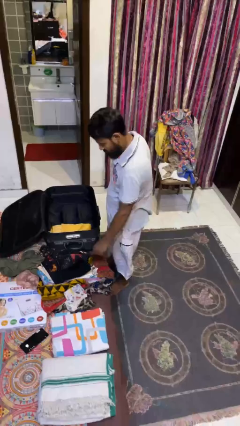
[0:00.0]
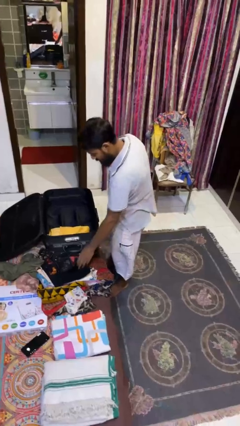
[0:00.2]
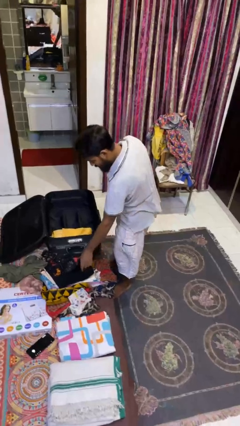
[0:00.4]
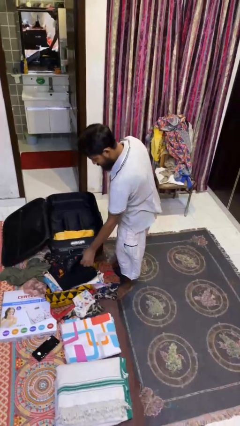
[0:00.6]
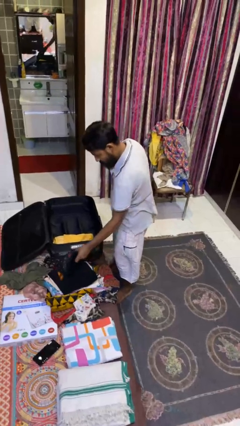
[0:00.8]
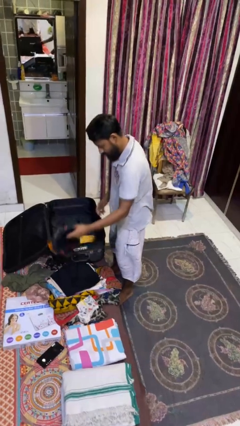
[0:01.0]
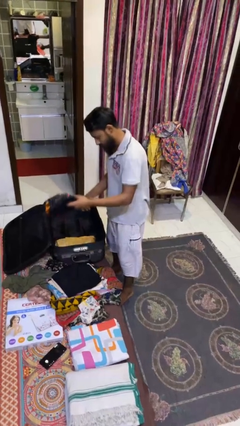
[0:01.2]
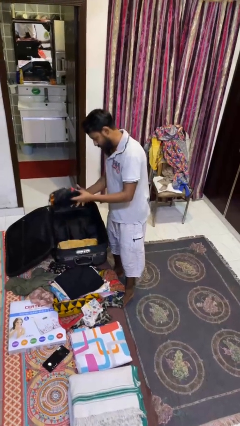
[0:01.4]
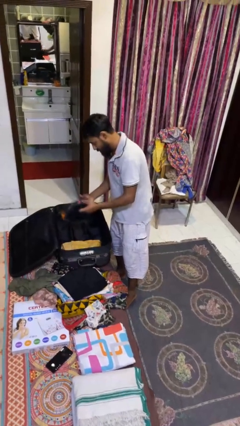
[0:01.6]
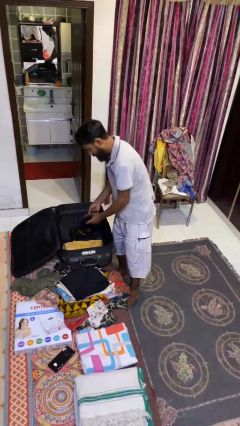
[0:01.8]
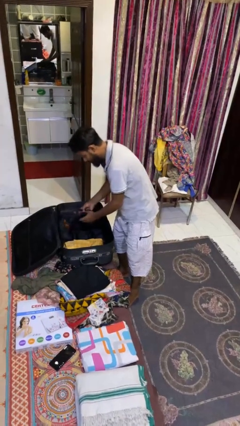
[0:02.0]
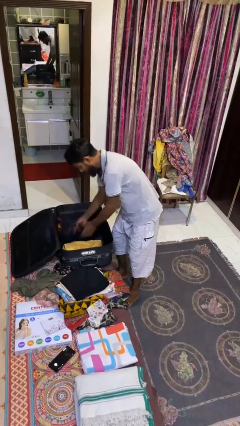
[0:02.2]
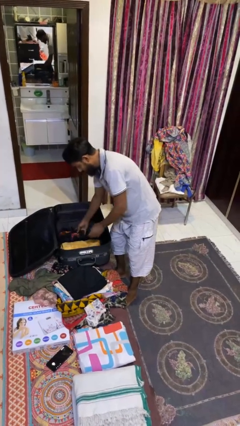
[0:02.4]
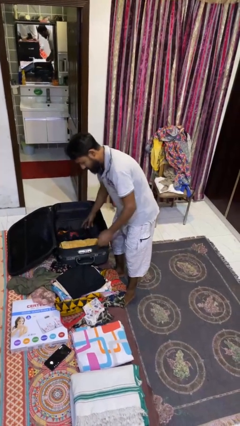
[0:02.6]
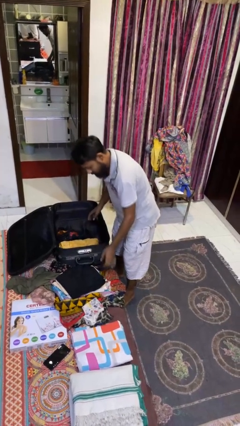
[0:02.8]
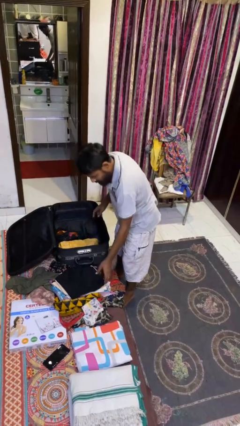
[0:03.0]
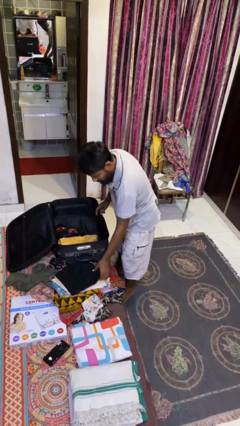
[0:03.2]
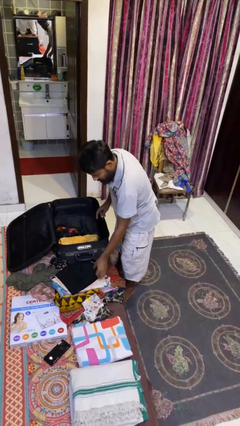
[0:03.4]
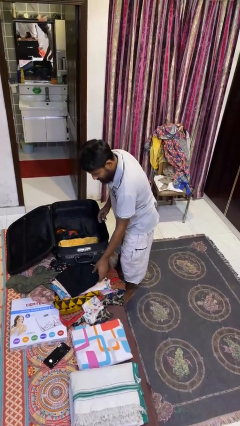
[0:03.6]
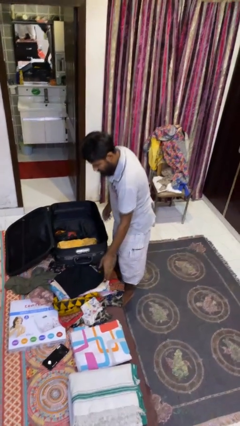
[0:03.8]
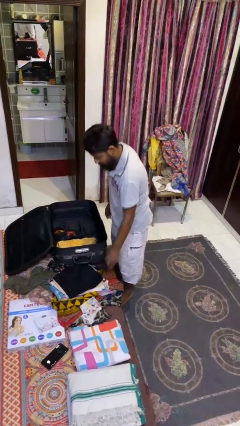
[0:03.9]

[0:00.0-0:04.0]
person loads clothes into suitcase

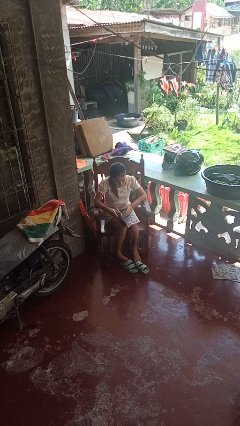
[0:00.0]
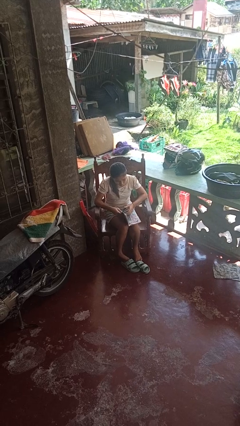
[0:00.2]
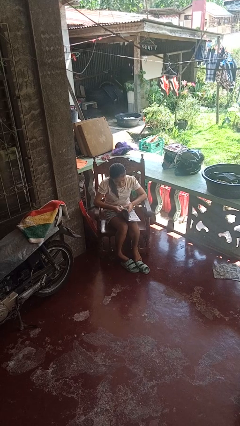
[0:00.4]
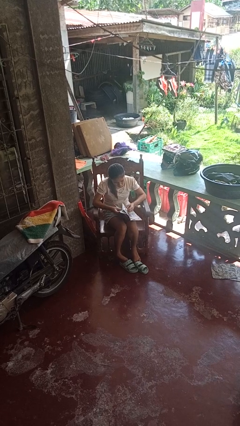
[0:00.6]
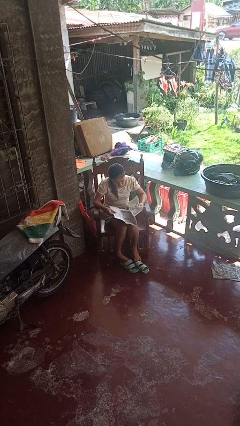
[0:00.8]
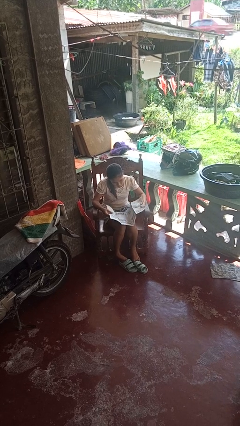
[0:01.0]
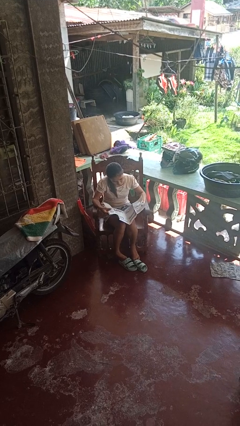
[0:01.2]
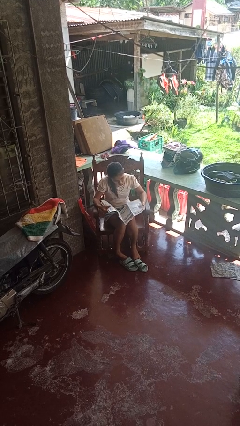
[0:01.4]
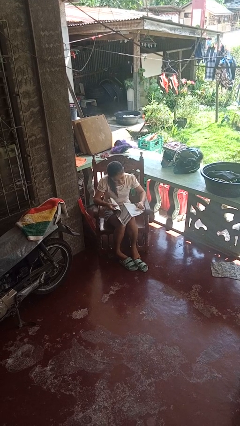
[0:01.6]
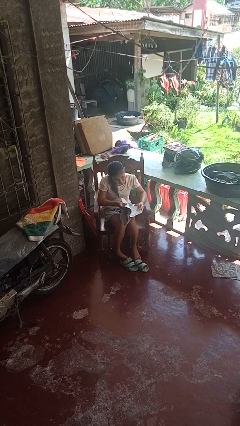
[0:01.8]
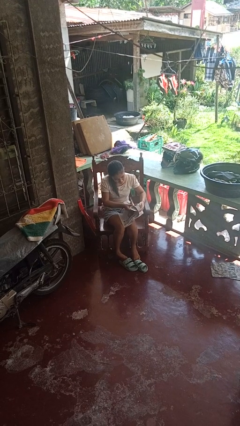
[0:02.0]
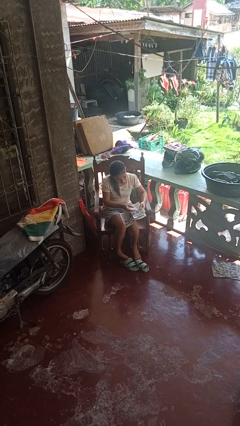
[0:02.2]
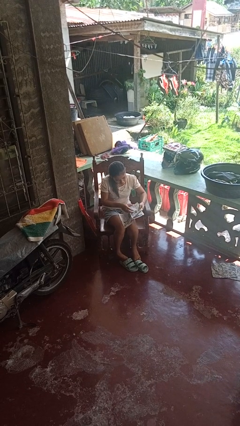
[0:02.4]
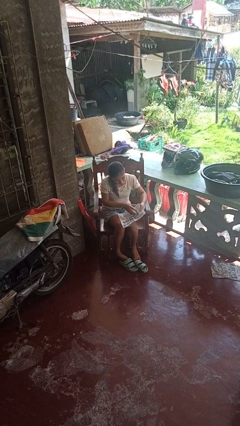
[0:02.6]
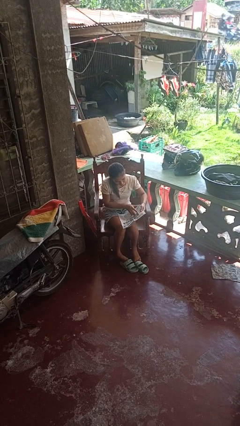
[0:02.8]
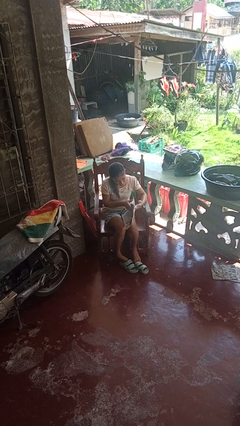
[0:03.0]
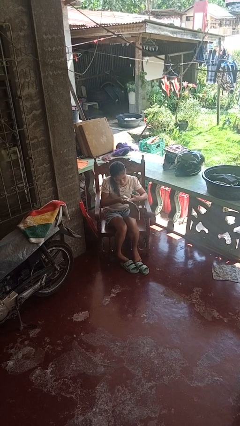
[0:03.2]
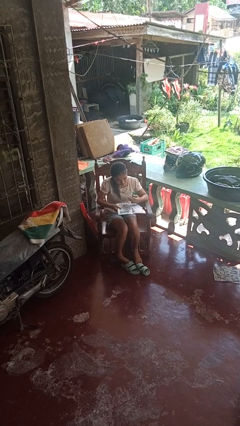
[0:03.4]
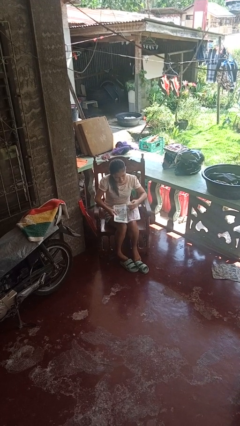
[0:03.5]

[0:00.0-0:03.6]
person reads newspaper

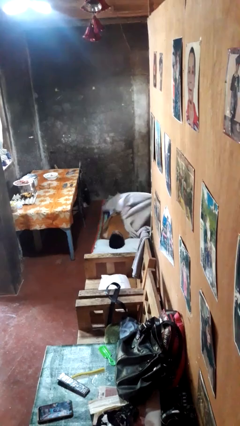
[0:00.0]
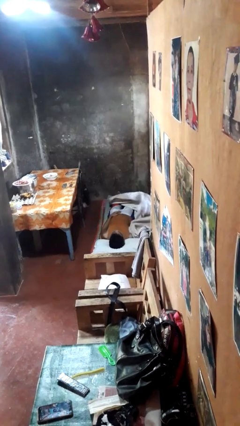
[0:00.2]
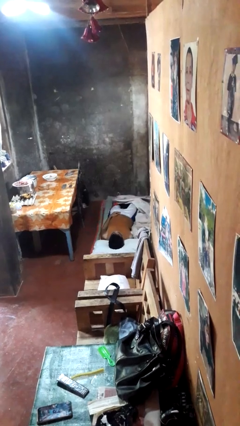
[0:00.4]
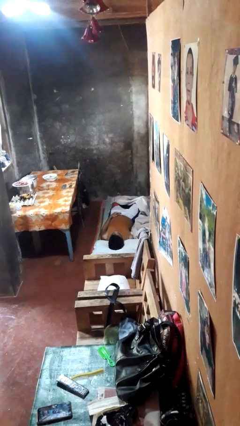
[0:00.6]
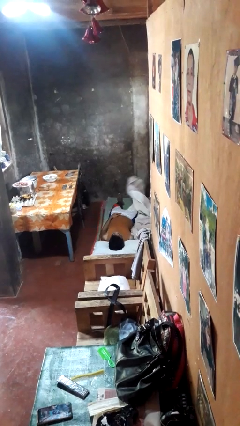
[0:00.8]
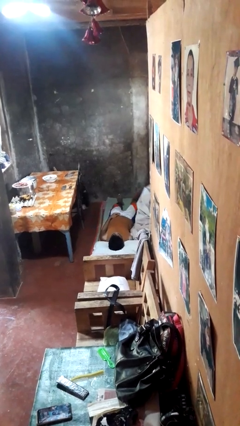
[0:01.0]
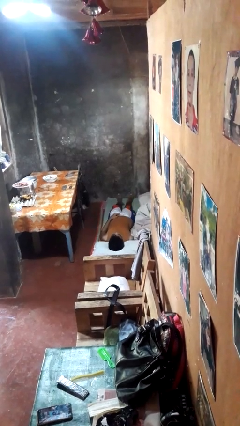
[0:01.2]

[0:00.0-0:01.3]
person uncovers with bedsheets

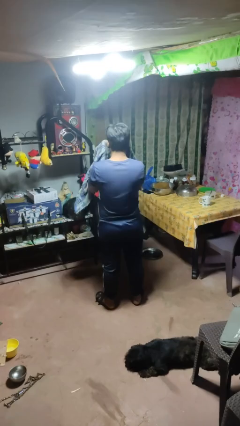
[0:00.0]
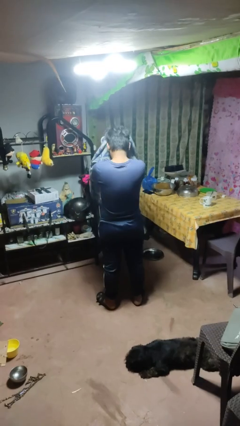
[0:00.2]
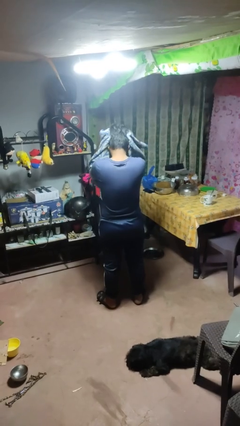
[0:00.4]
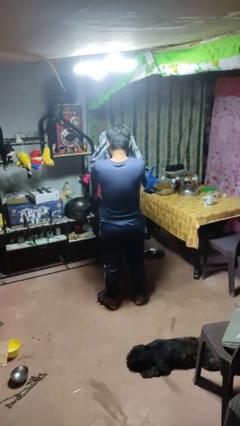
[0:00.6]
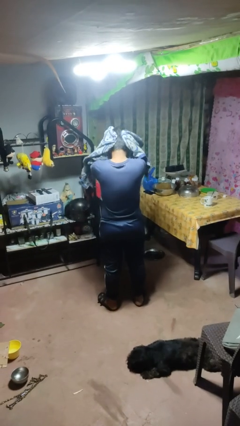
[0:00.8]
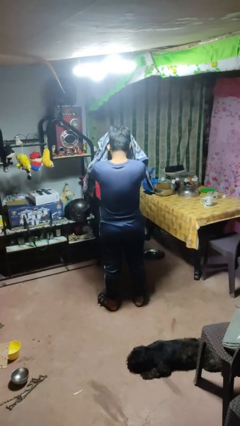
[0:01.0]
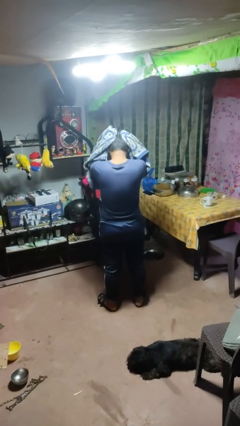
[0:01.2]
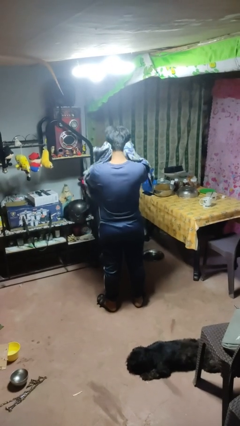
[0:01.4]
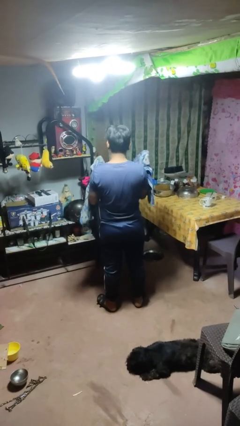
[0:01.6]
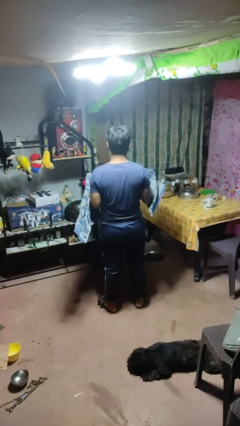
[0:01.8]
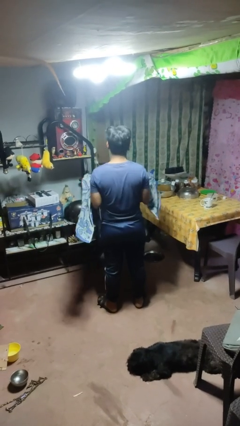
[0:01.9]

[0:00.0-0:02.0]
person dries hair with towel

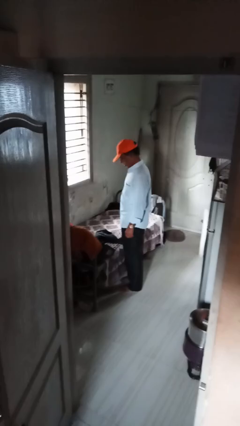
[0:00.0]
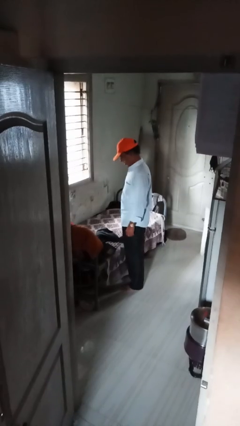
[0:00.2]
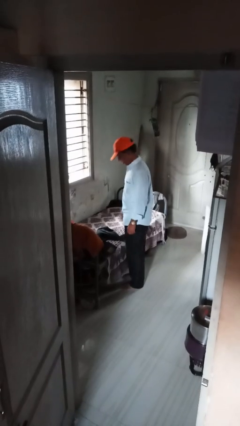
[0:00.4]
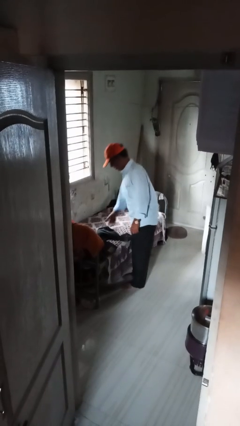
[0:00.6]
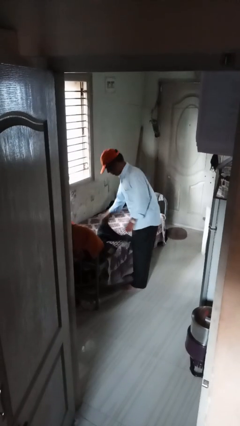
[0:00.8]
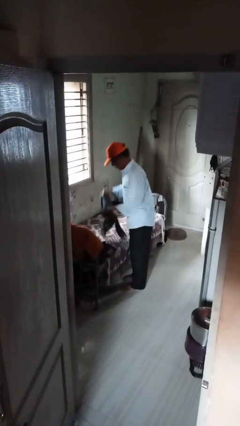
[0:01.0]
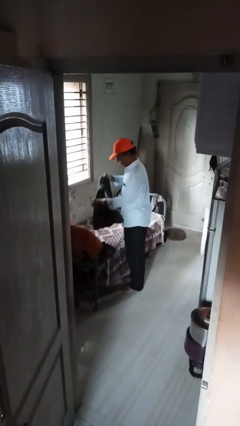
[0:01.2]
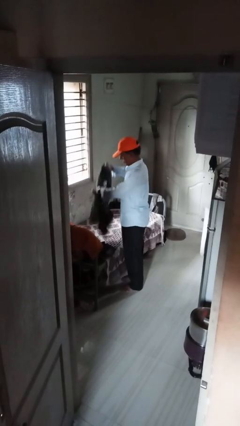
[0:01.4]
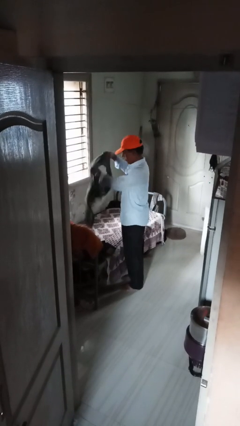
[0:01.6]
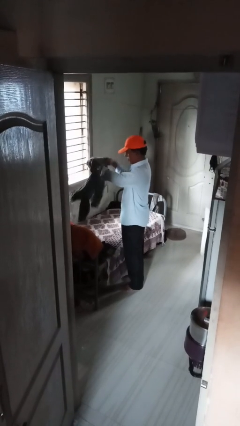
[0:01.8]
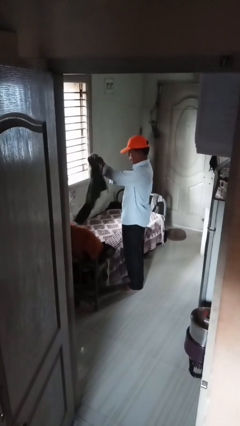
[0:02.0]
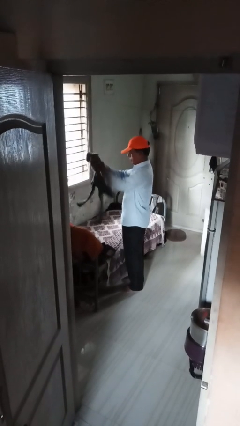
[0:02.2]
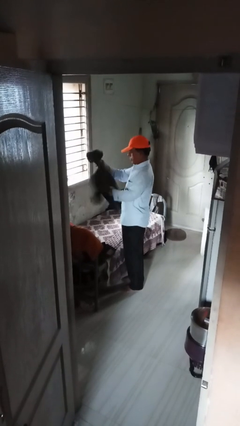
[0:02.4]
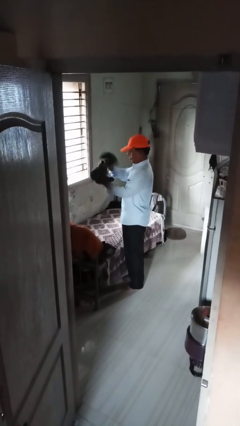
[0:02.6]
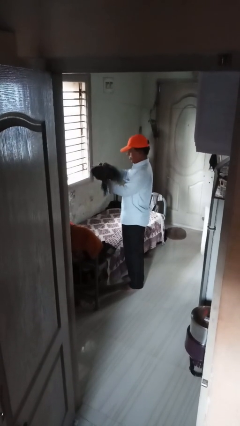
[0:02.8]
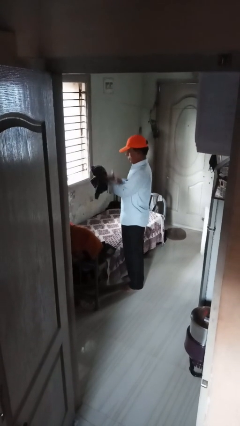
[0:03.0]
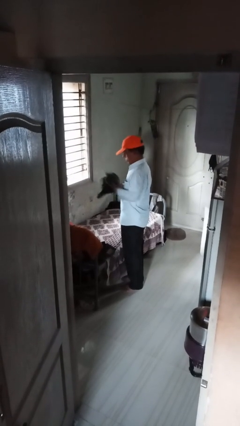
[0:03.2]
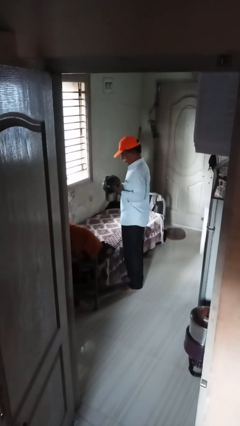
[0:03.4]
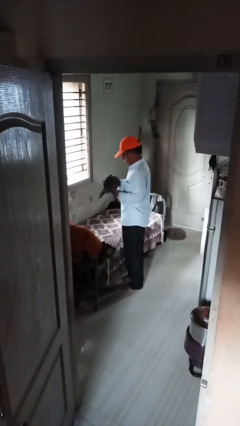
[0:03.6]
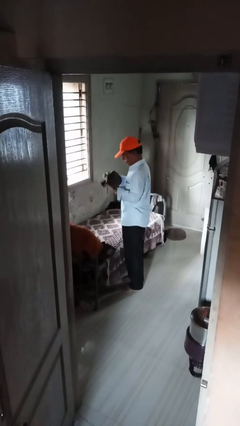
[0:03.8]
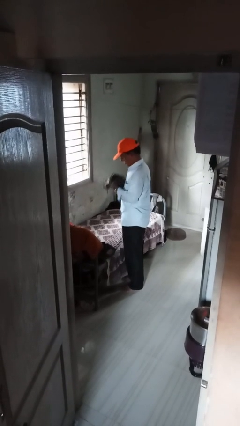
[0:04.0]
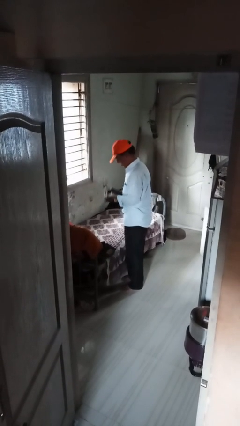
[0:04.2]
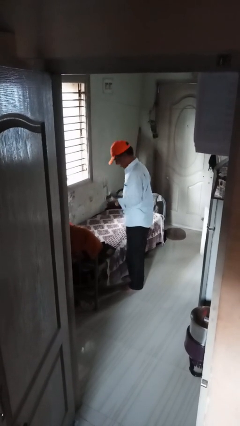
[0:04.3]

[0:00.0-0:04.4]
person folds shirt

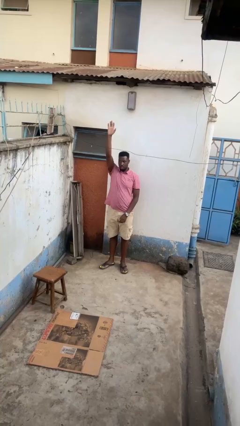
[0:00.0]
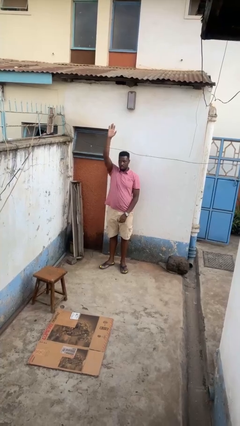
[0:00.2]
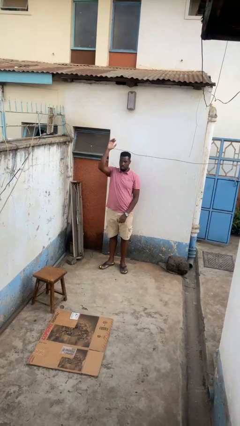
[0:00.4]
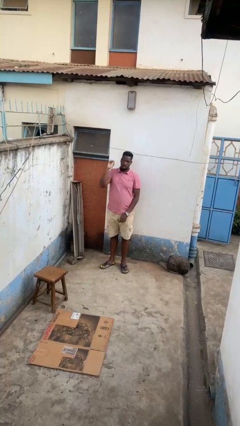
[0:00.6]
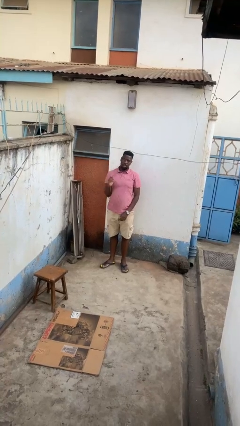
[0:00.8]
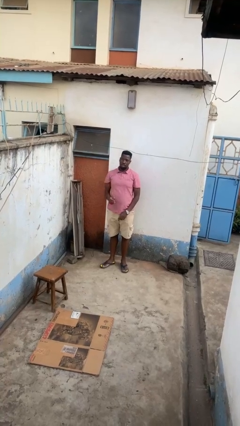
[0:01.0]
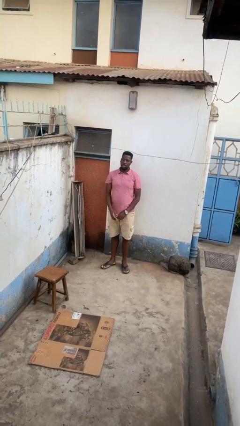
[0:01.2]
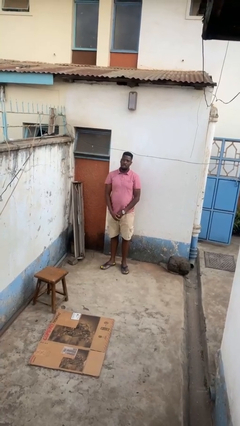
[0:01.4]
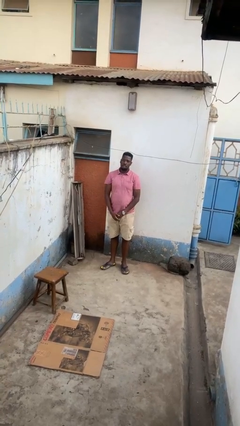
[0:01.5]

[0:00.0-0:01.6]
person gestures lower hand

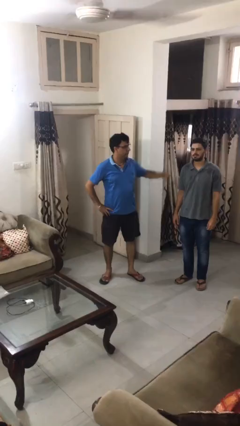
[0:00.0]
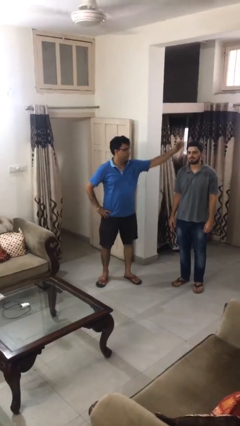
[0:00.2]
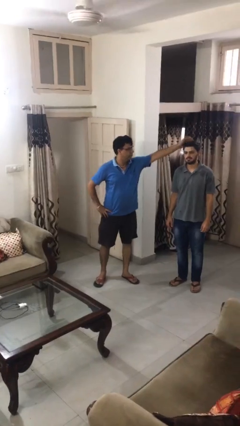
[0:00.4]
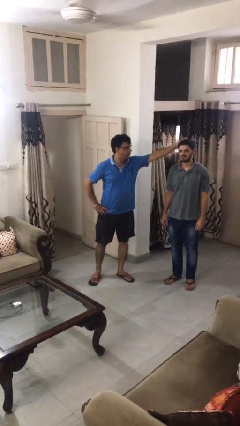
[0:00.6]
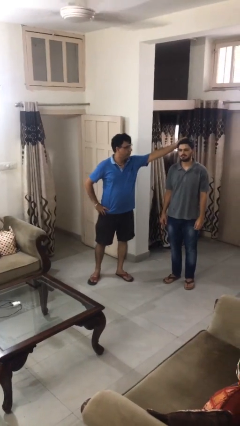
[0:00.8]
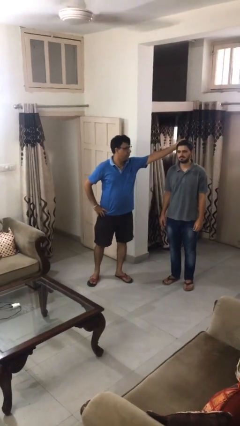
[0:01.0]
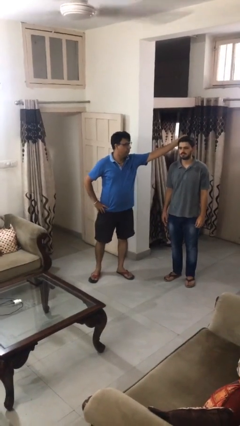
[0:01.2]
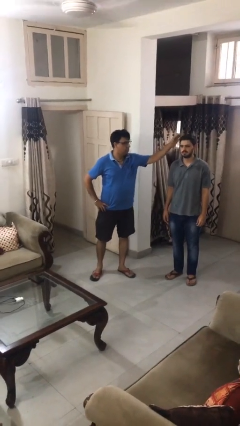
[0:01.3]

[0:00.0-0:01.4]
person grabs person by hair
